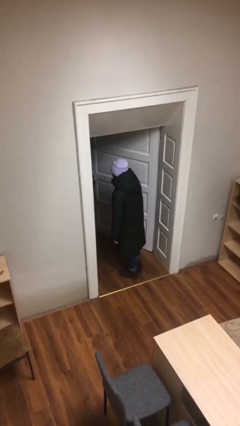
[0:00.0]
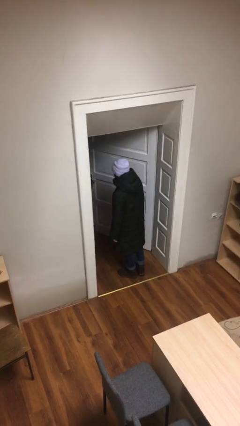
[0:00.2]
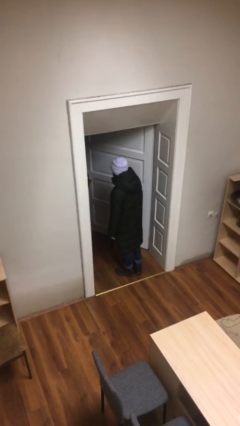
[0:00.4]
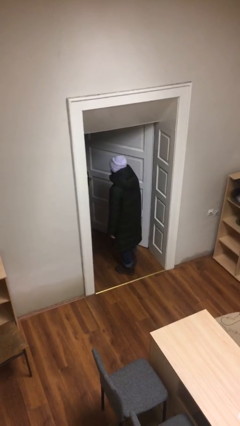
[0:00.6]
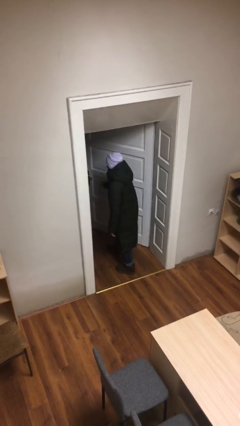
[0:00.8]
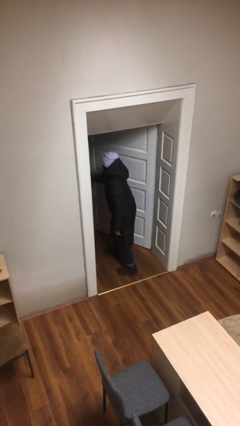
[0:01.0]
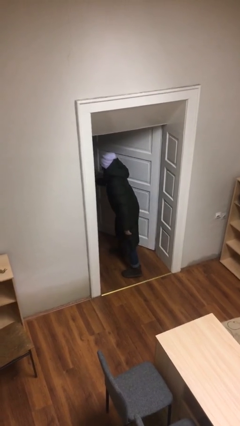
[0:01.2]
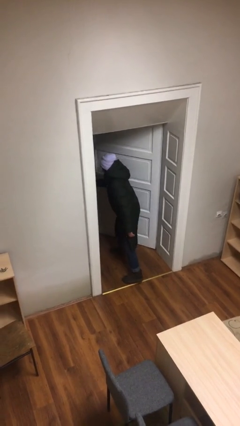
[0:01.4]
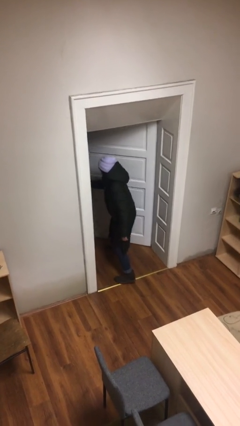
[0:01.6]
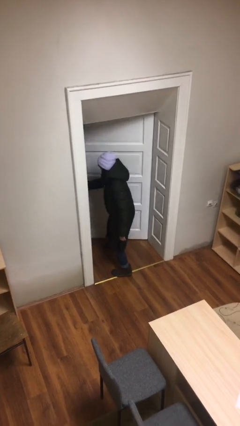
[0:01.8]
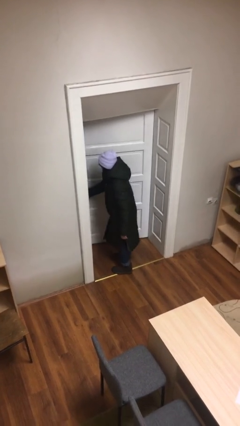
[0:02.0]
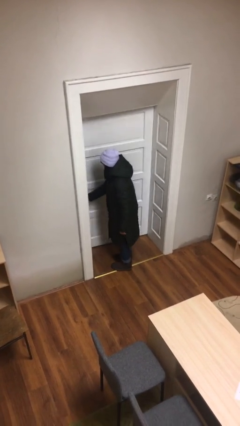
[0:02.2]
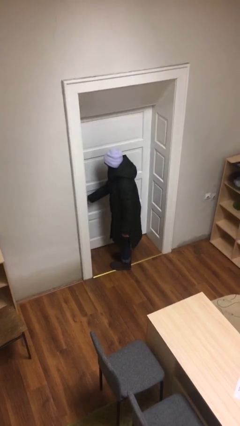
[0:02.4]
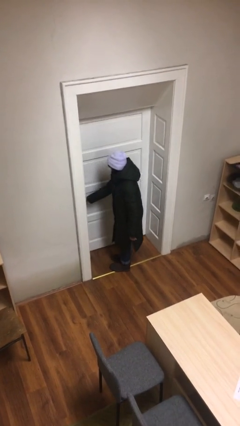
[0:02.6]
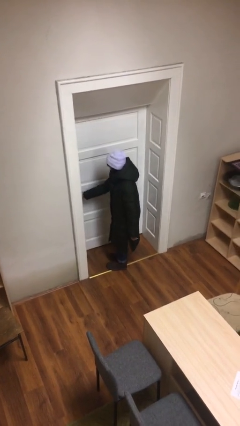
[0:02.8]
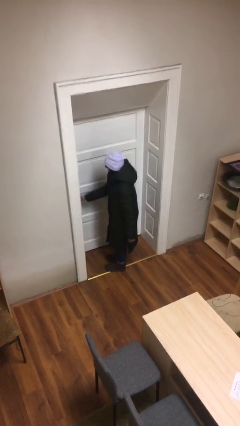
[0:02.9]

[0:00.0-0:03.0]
person closes facility door

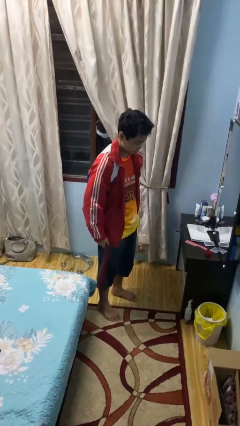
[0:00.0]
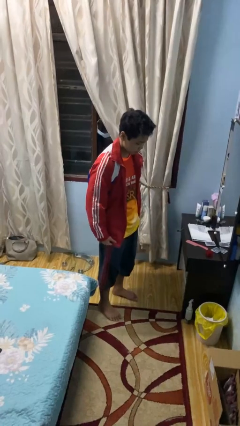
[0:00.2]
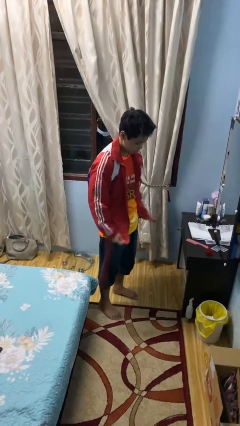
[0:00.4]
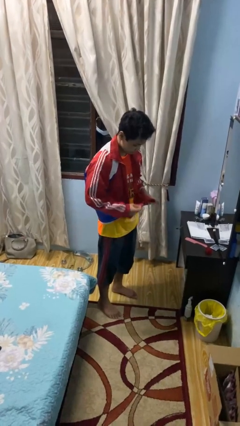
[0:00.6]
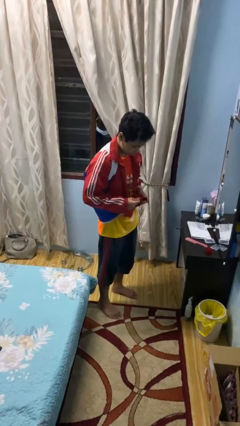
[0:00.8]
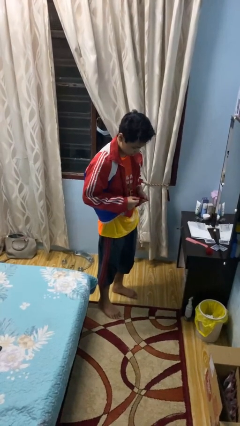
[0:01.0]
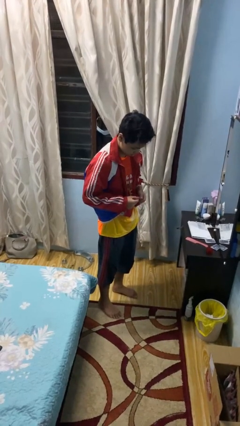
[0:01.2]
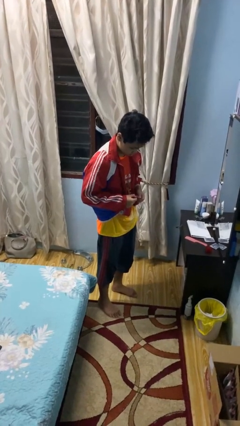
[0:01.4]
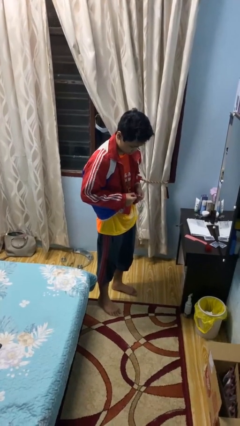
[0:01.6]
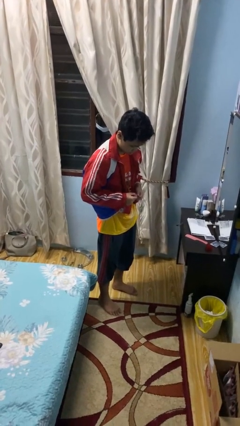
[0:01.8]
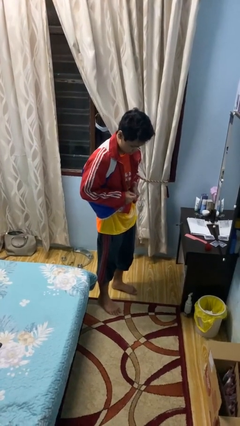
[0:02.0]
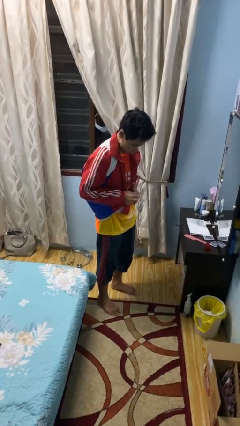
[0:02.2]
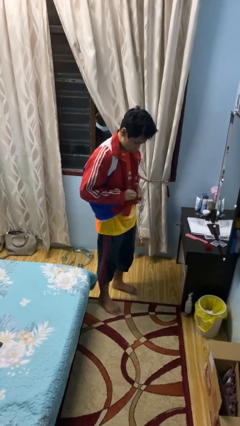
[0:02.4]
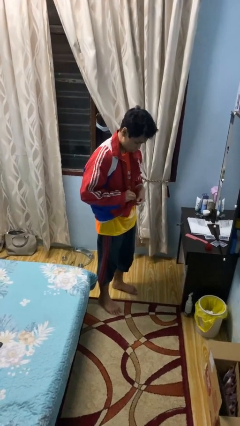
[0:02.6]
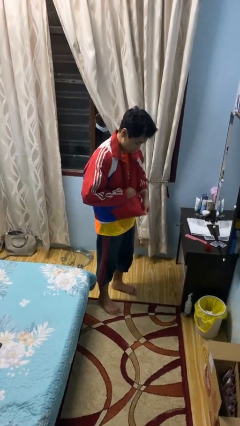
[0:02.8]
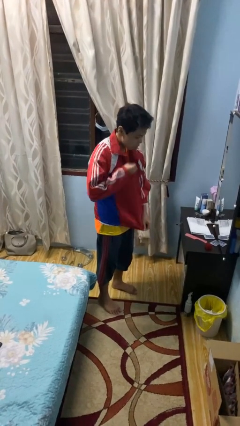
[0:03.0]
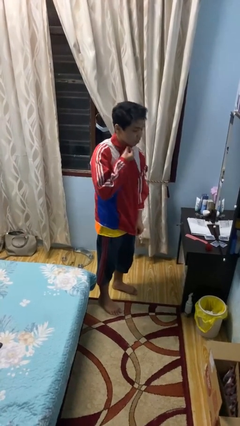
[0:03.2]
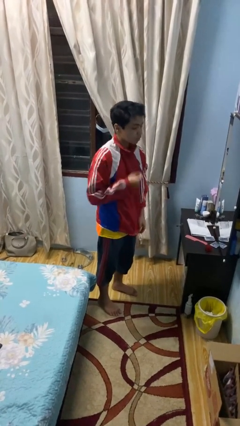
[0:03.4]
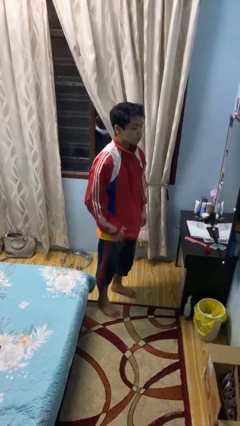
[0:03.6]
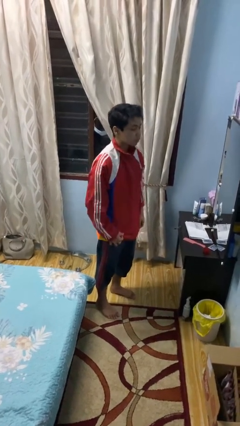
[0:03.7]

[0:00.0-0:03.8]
person zips up jacket

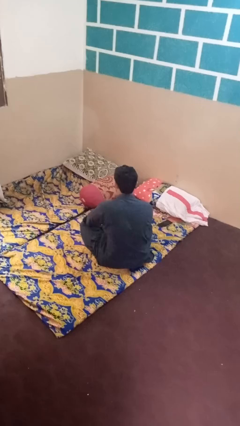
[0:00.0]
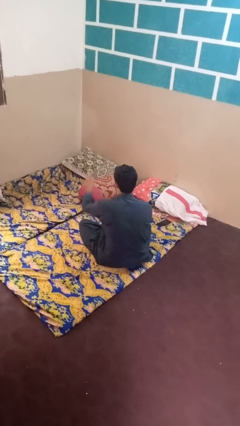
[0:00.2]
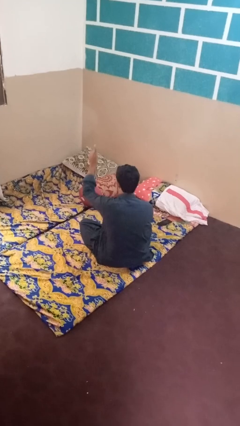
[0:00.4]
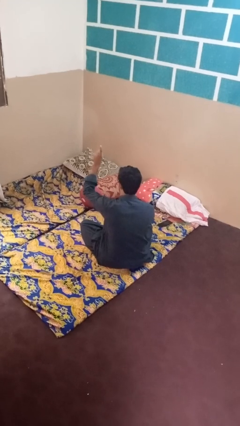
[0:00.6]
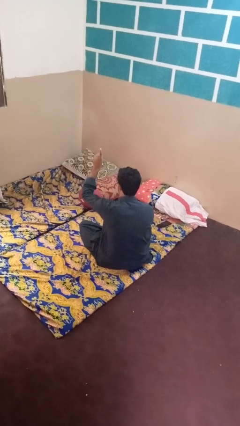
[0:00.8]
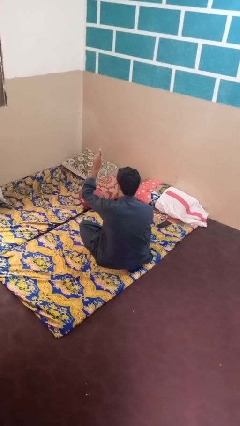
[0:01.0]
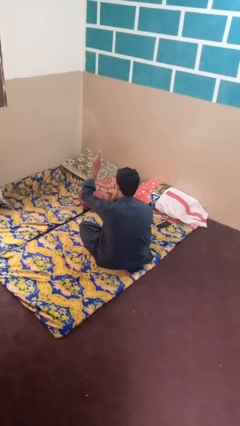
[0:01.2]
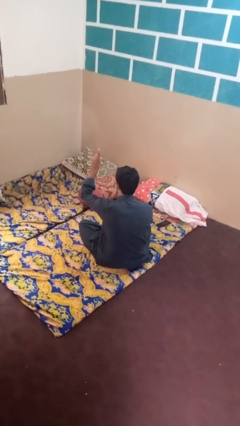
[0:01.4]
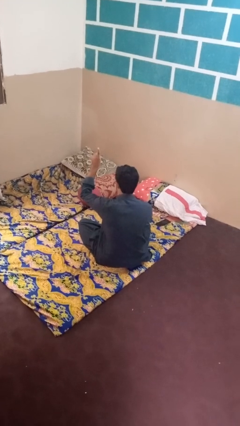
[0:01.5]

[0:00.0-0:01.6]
person gestures hang loose

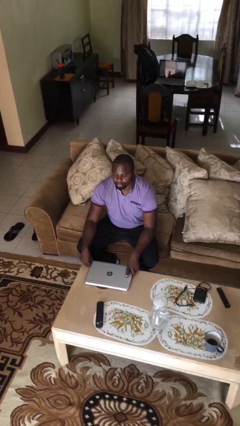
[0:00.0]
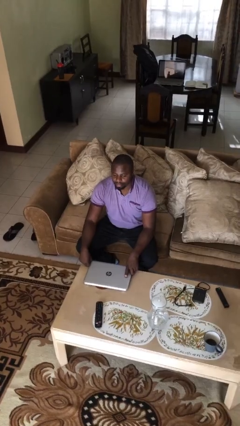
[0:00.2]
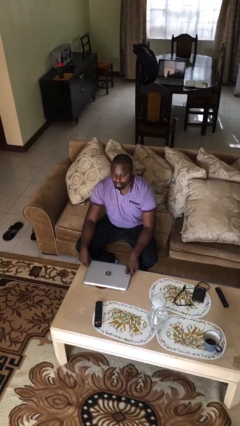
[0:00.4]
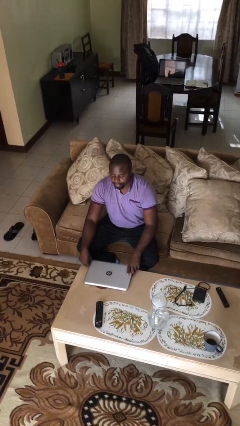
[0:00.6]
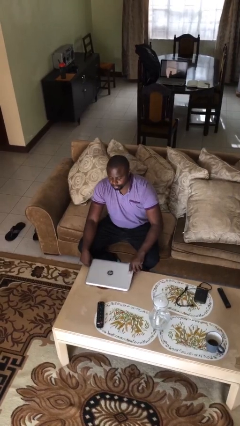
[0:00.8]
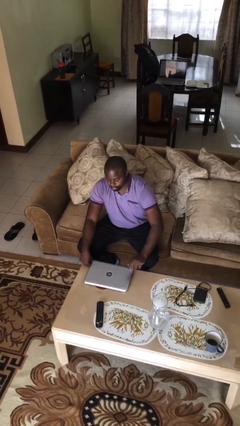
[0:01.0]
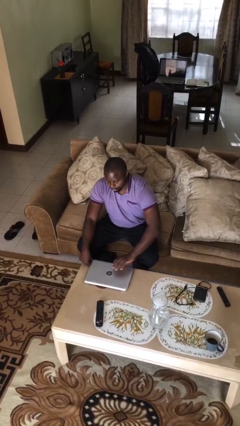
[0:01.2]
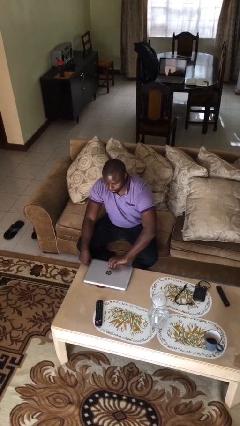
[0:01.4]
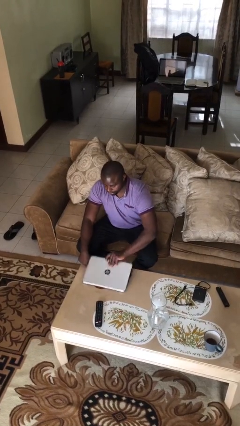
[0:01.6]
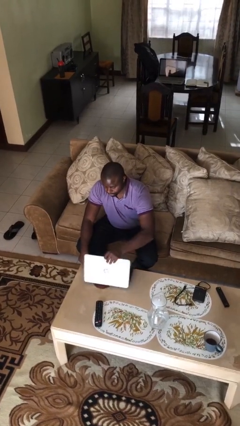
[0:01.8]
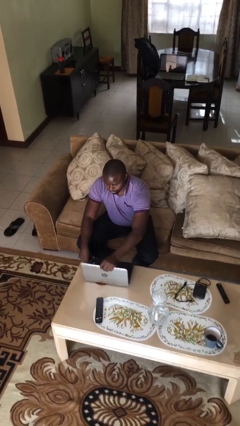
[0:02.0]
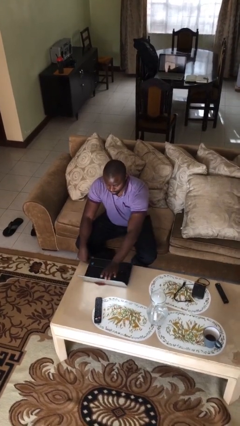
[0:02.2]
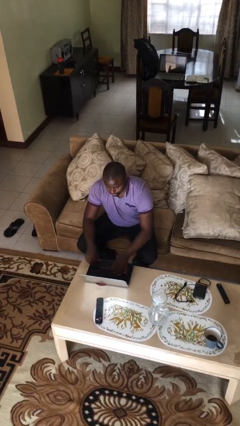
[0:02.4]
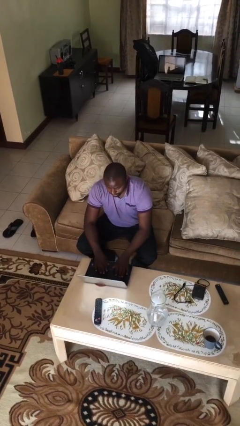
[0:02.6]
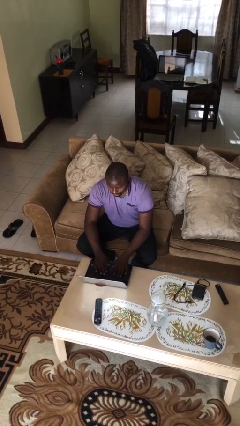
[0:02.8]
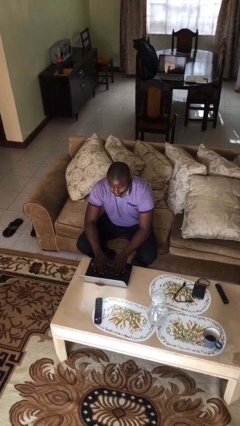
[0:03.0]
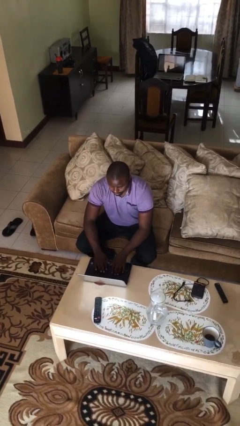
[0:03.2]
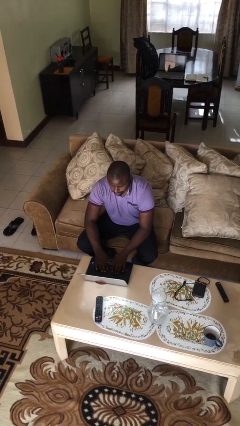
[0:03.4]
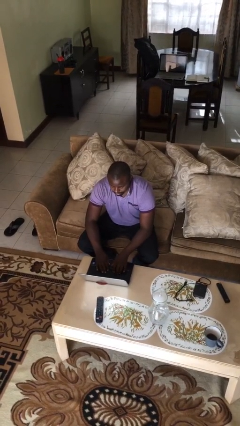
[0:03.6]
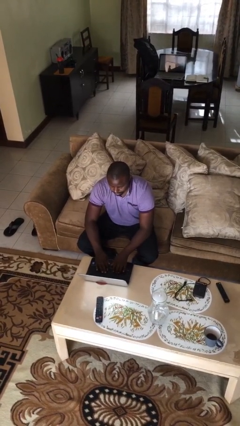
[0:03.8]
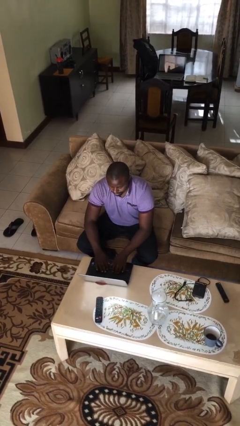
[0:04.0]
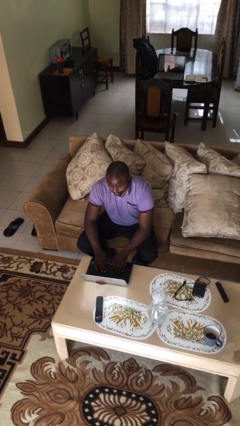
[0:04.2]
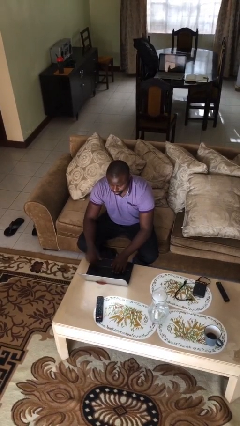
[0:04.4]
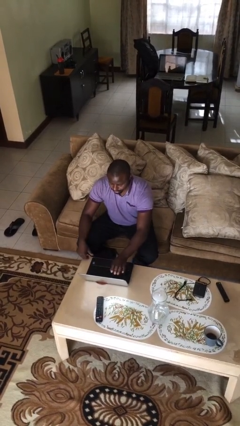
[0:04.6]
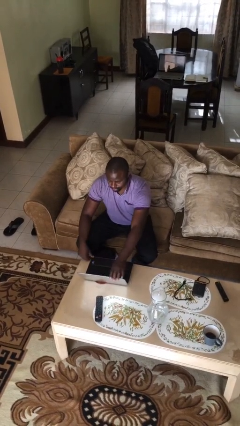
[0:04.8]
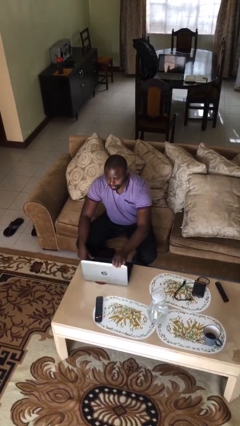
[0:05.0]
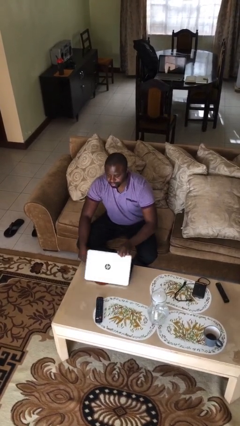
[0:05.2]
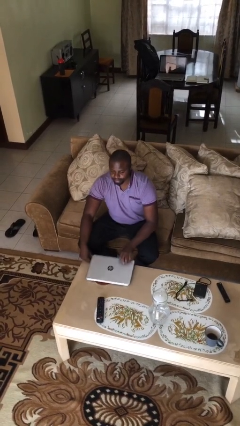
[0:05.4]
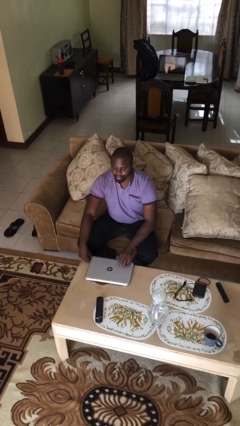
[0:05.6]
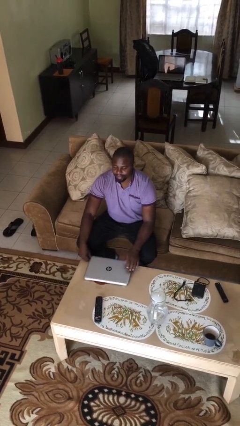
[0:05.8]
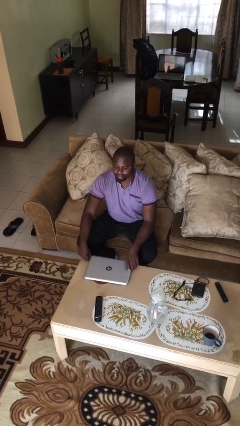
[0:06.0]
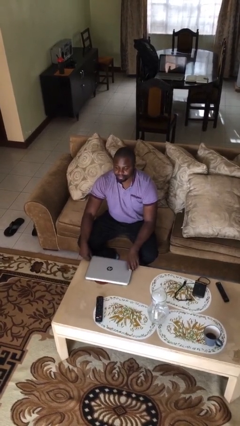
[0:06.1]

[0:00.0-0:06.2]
person interacts with laptop

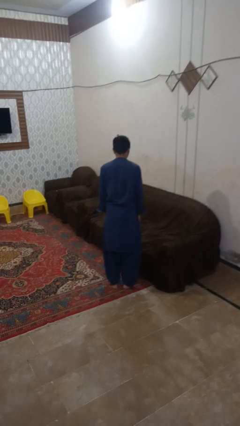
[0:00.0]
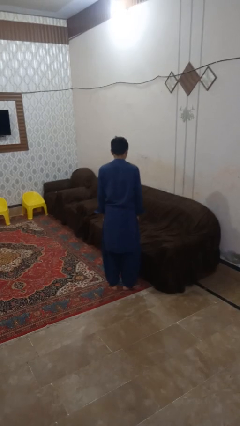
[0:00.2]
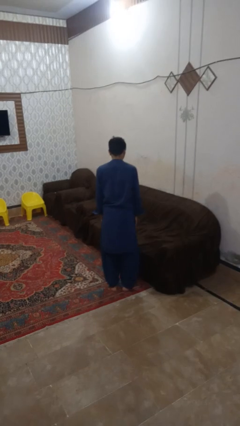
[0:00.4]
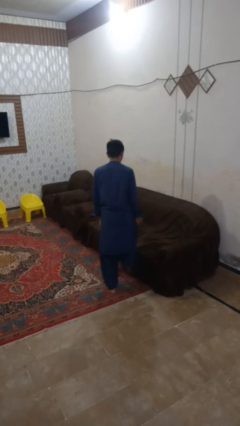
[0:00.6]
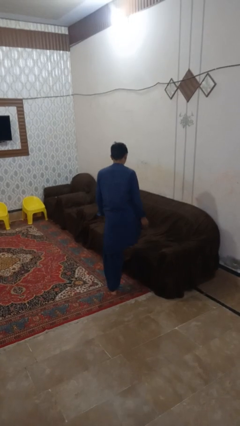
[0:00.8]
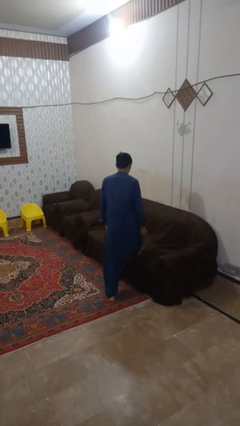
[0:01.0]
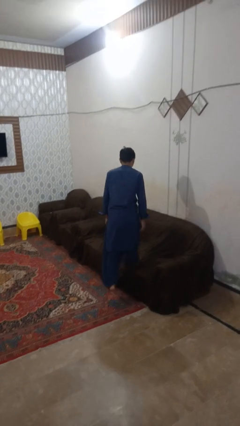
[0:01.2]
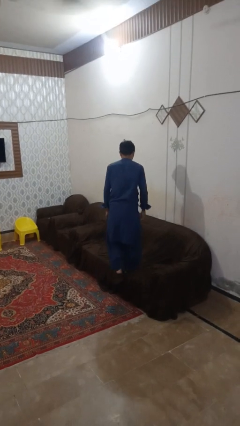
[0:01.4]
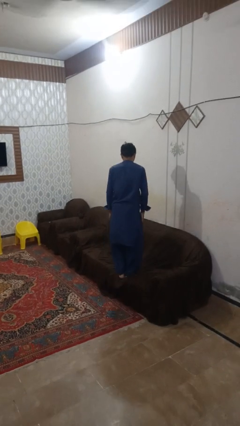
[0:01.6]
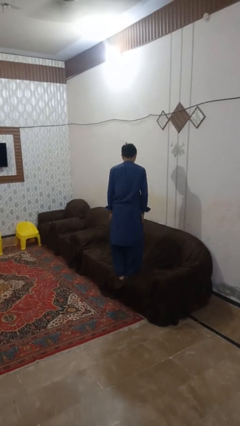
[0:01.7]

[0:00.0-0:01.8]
person climbs on couch

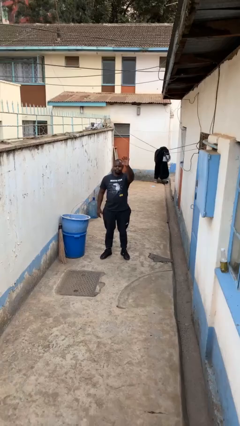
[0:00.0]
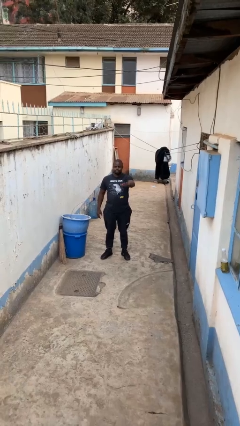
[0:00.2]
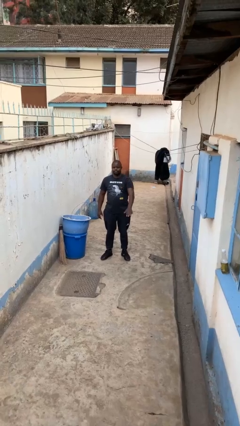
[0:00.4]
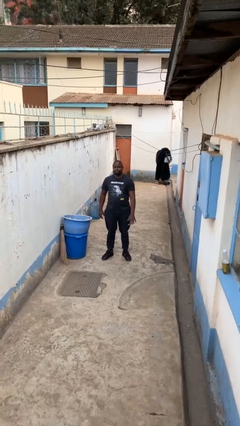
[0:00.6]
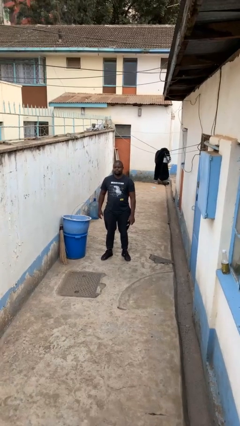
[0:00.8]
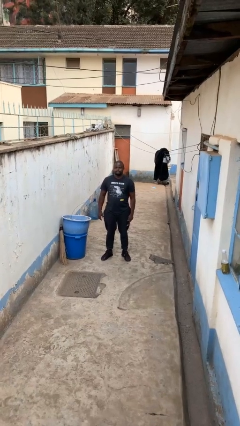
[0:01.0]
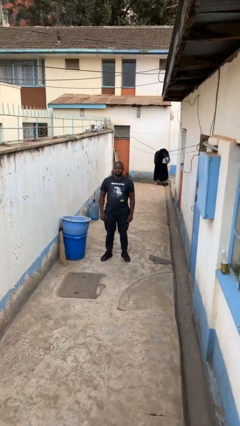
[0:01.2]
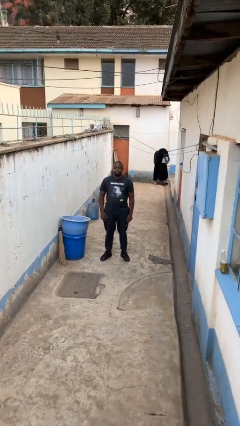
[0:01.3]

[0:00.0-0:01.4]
person gestures swipe down
